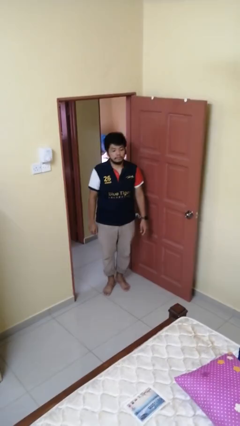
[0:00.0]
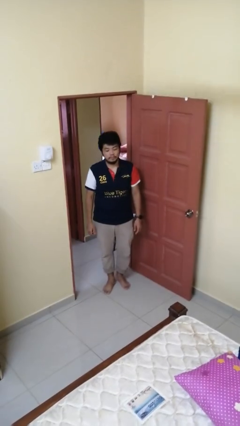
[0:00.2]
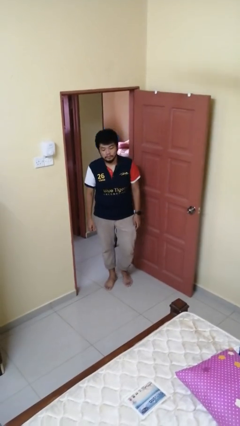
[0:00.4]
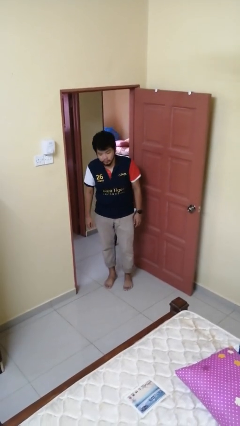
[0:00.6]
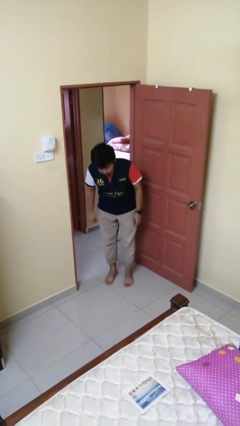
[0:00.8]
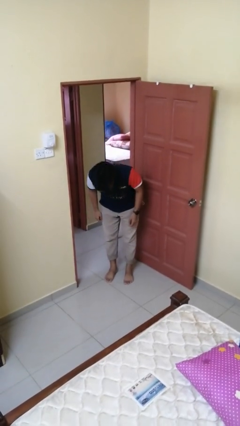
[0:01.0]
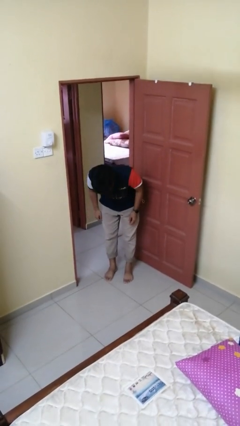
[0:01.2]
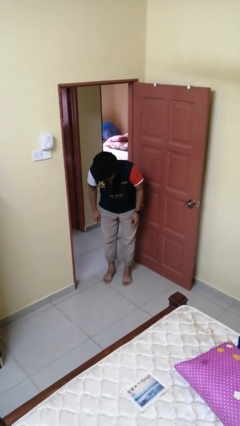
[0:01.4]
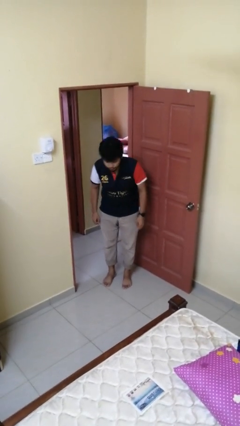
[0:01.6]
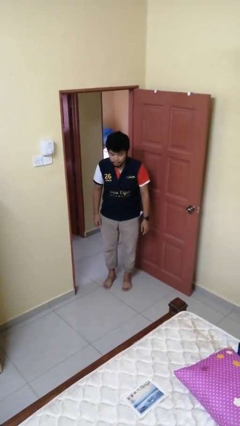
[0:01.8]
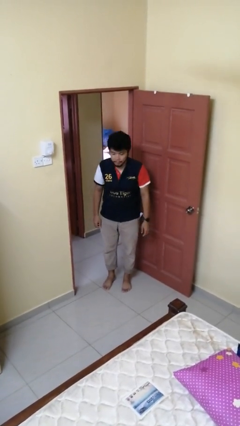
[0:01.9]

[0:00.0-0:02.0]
person bows

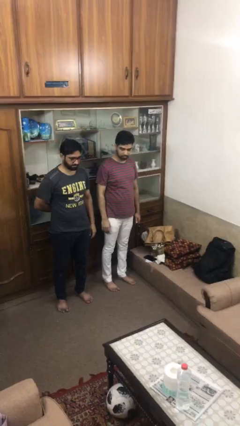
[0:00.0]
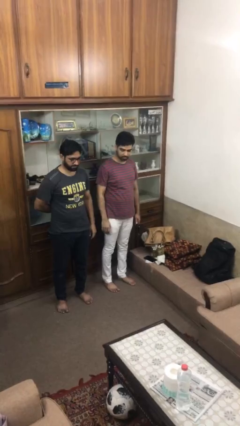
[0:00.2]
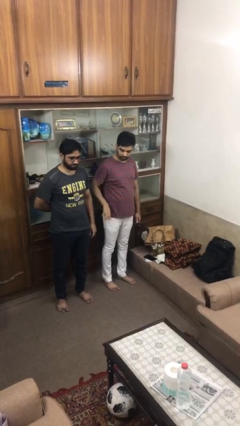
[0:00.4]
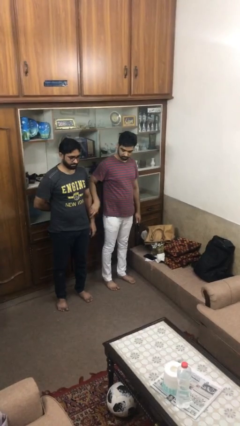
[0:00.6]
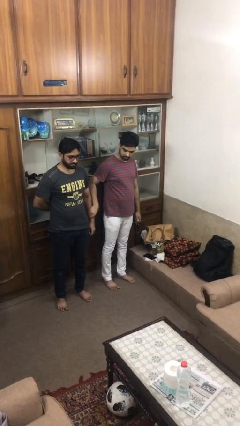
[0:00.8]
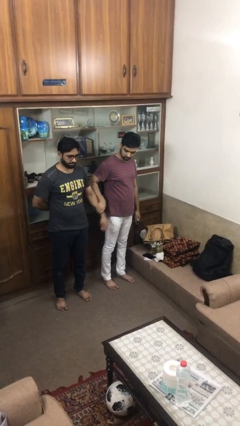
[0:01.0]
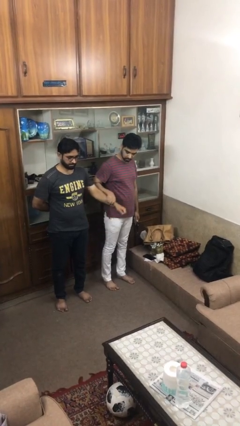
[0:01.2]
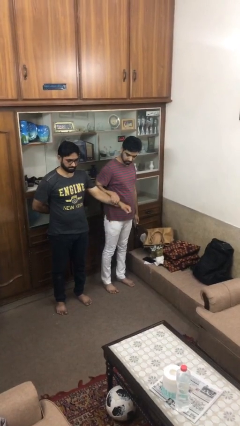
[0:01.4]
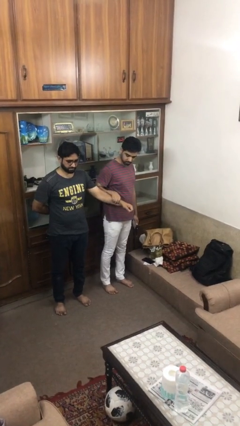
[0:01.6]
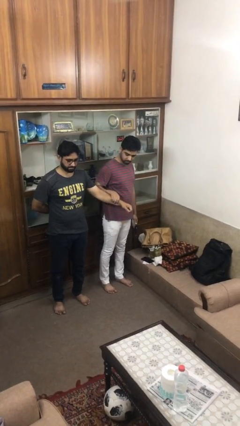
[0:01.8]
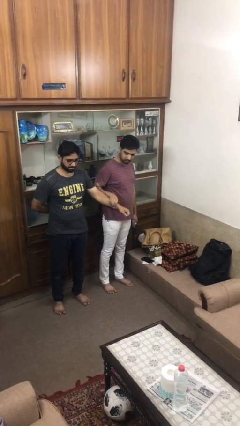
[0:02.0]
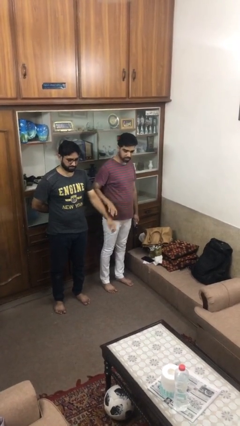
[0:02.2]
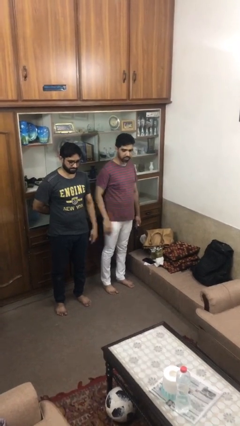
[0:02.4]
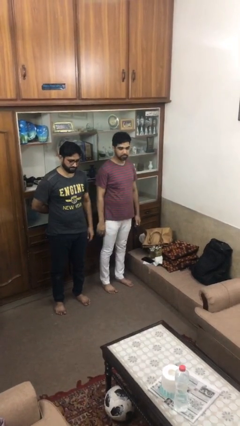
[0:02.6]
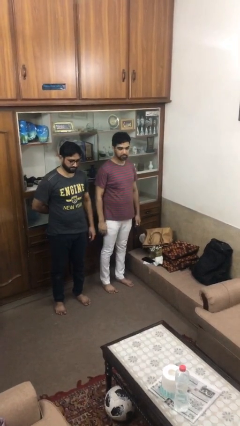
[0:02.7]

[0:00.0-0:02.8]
person grabs person by forearm

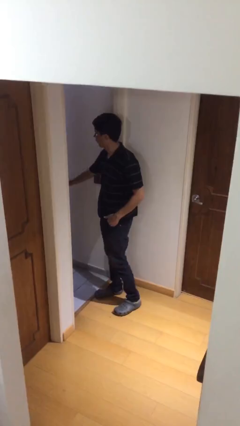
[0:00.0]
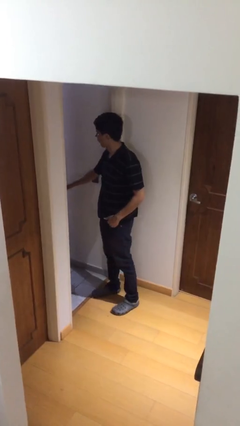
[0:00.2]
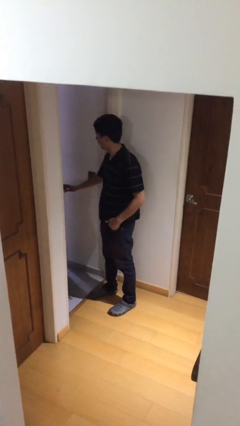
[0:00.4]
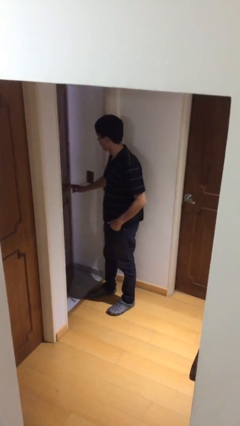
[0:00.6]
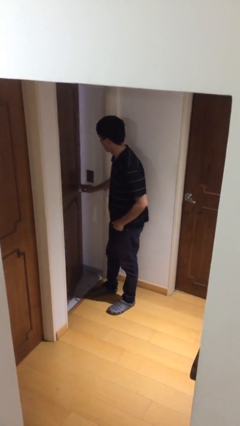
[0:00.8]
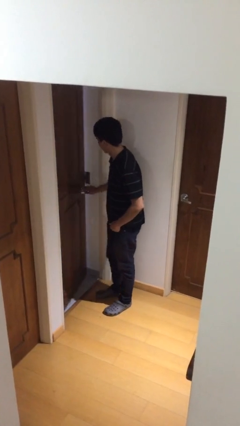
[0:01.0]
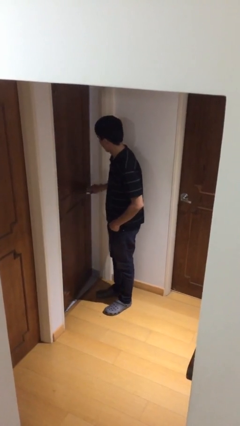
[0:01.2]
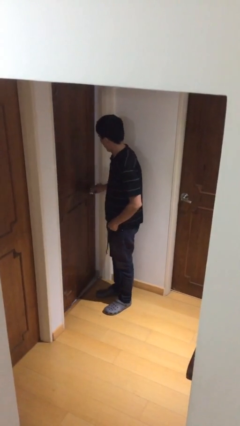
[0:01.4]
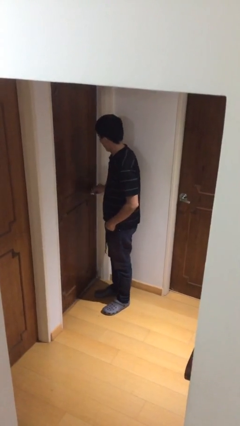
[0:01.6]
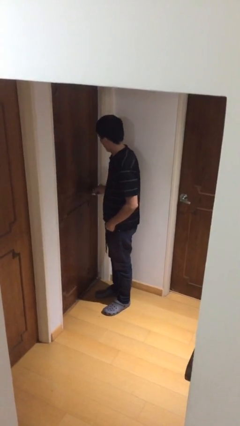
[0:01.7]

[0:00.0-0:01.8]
person closes facility door

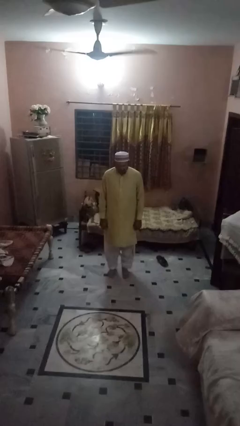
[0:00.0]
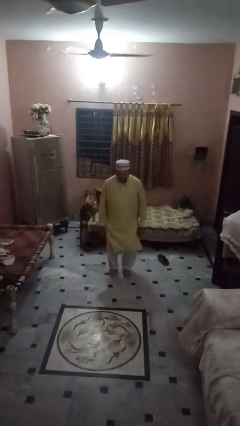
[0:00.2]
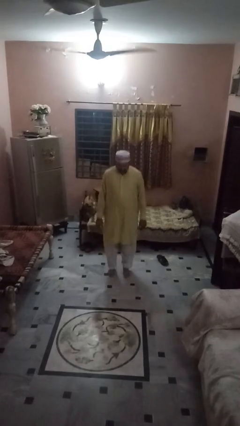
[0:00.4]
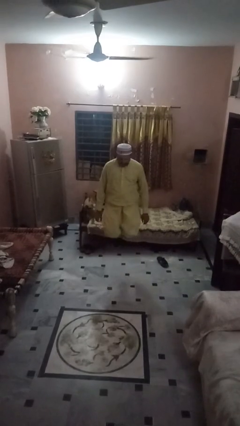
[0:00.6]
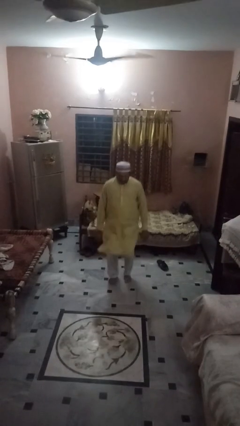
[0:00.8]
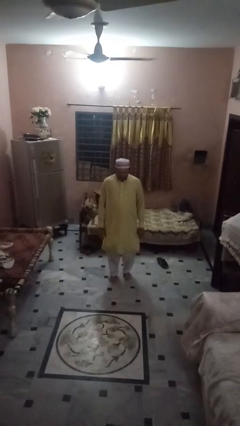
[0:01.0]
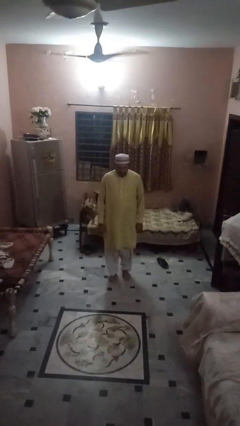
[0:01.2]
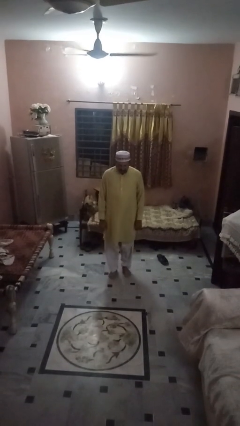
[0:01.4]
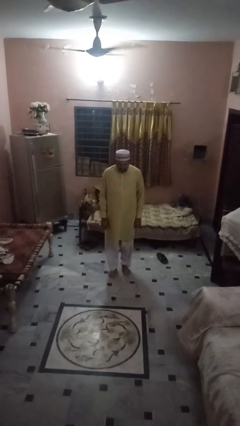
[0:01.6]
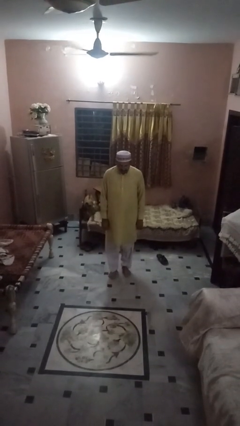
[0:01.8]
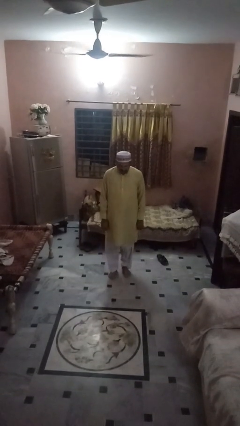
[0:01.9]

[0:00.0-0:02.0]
person jumps

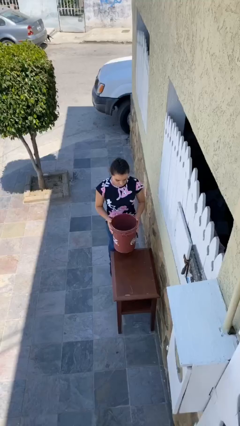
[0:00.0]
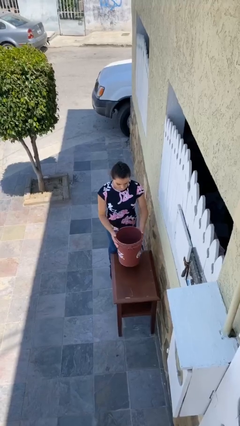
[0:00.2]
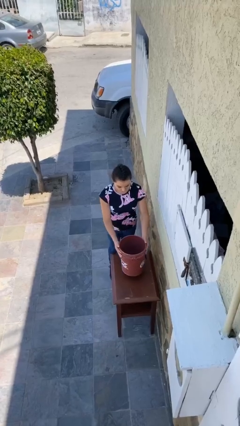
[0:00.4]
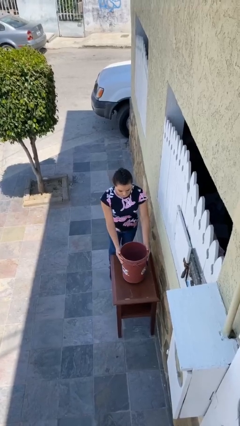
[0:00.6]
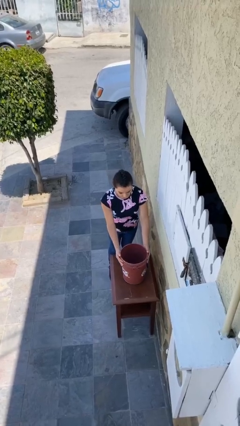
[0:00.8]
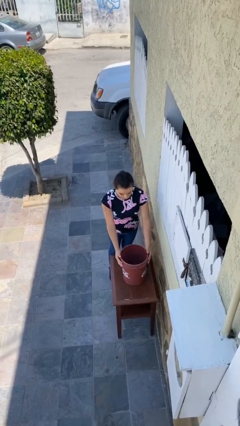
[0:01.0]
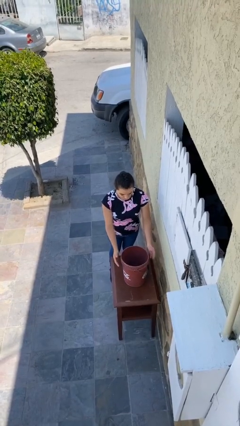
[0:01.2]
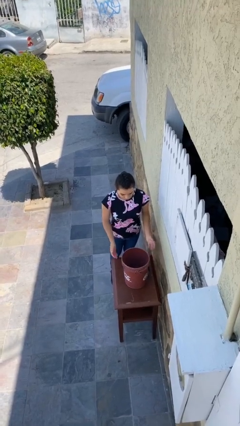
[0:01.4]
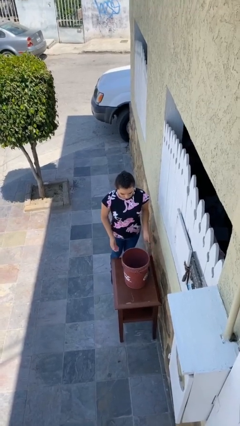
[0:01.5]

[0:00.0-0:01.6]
person puts down object on table

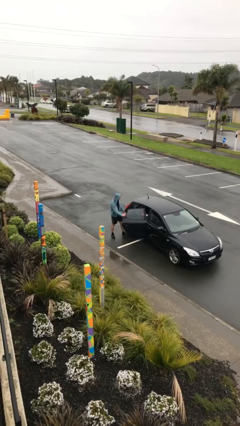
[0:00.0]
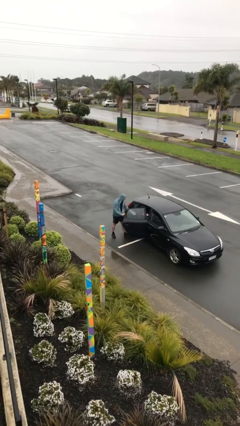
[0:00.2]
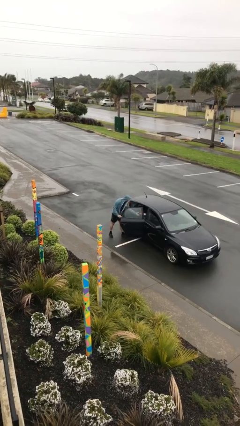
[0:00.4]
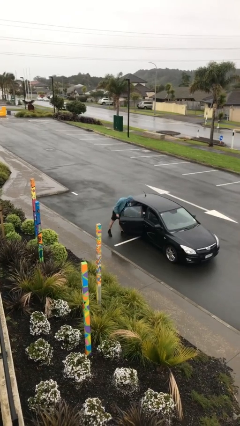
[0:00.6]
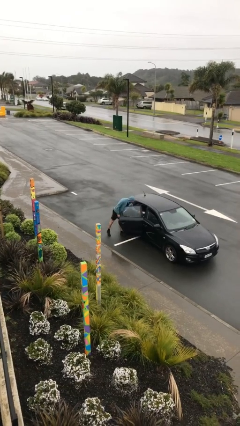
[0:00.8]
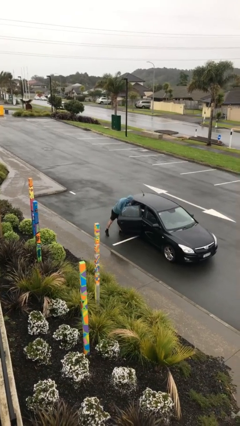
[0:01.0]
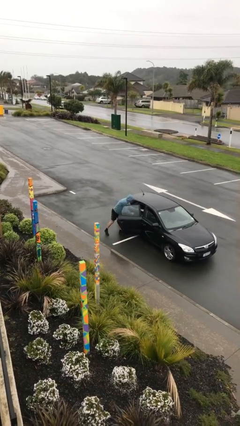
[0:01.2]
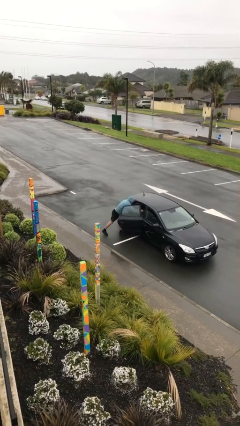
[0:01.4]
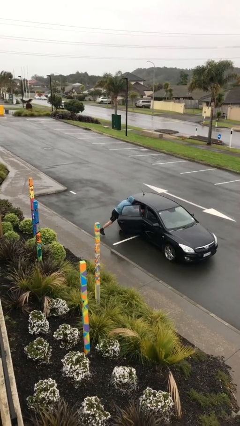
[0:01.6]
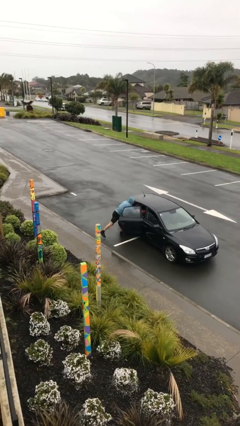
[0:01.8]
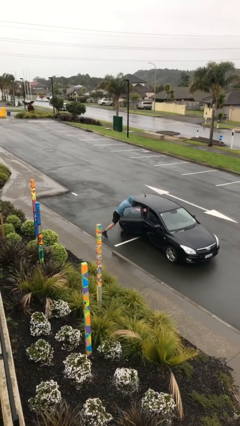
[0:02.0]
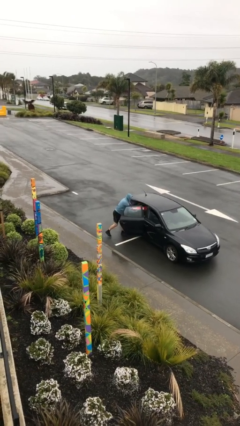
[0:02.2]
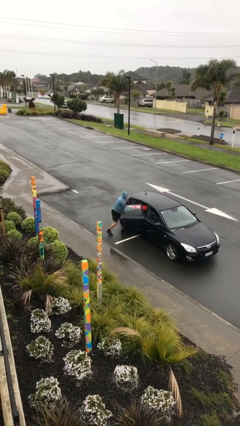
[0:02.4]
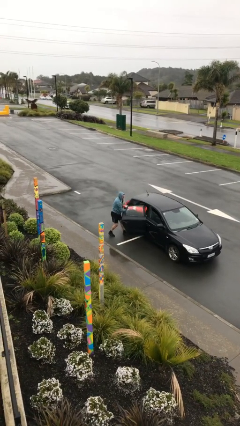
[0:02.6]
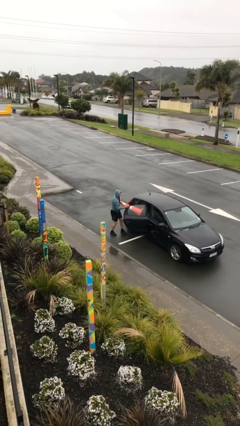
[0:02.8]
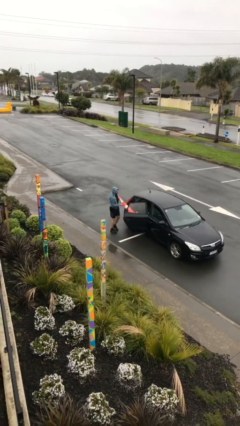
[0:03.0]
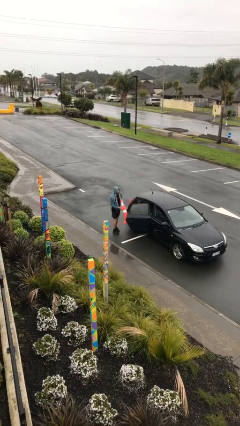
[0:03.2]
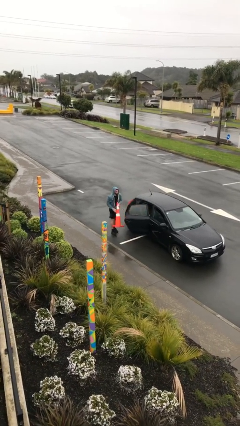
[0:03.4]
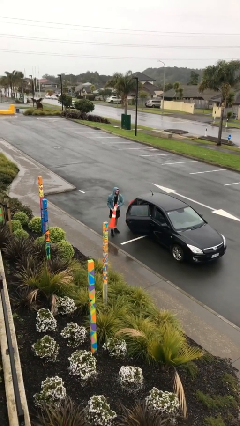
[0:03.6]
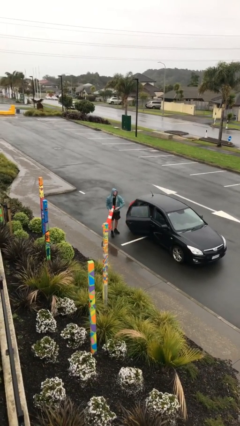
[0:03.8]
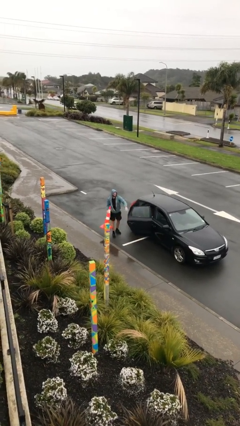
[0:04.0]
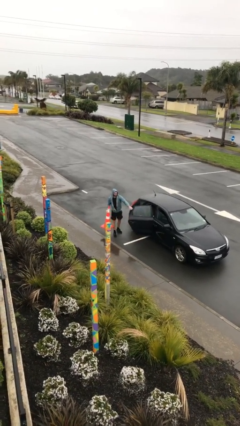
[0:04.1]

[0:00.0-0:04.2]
person unloads car

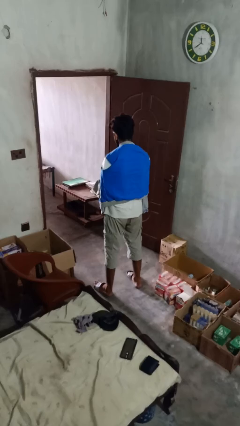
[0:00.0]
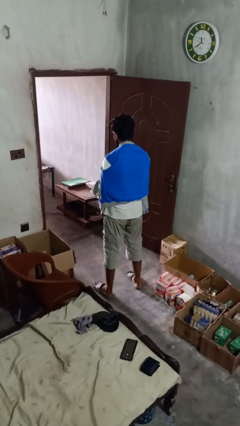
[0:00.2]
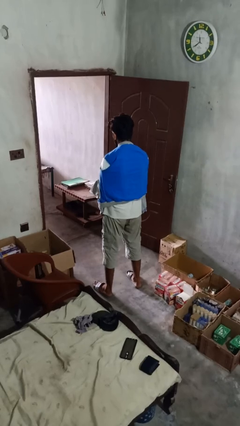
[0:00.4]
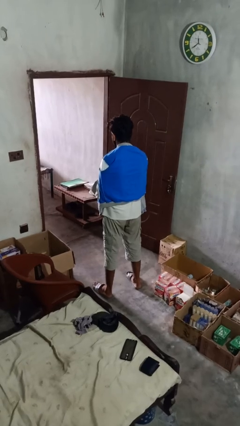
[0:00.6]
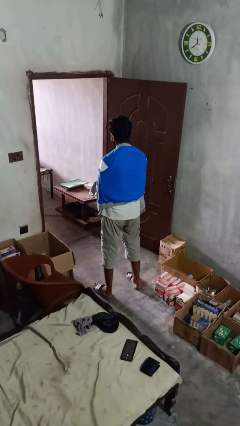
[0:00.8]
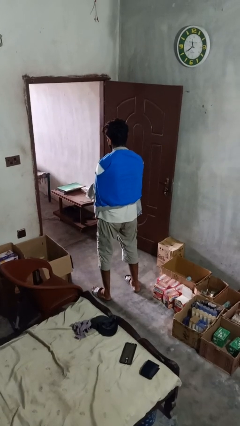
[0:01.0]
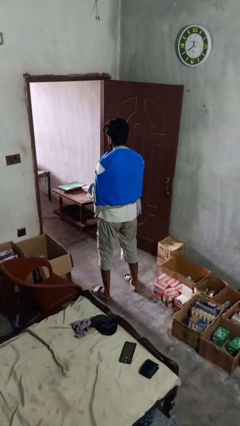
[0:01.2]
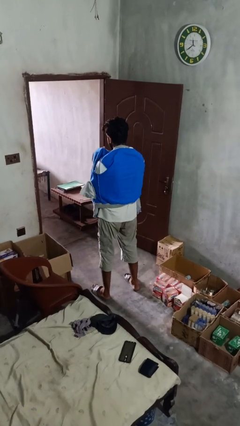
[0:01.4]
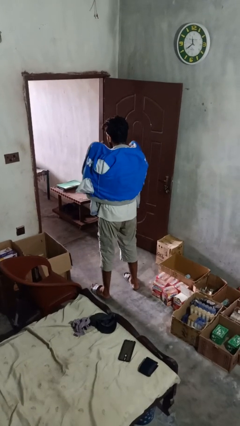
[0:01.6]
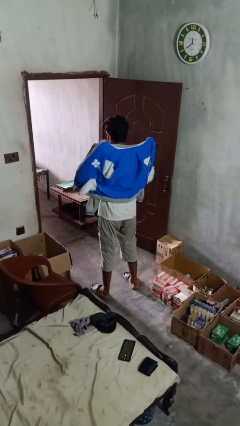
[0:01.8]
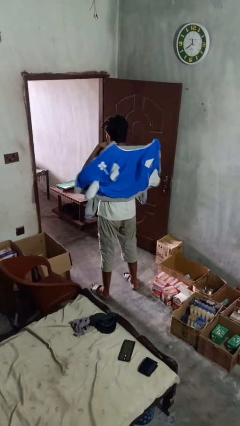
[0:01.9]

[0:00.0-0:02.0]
person unzips jacket

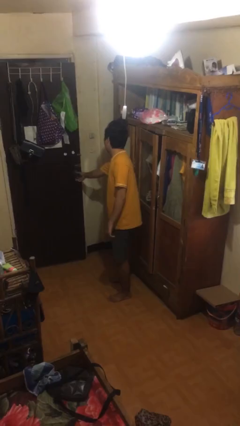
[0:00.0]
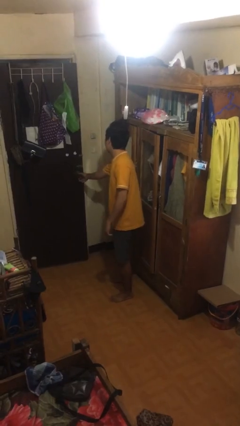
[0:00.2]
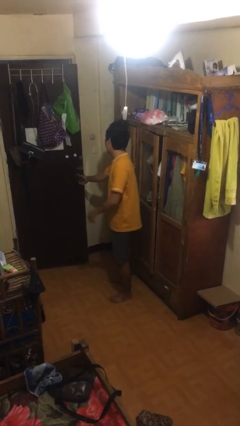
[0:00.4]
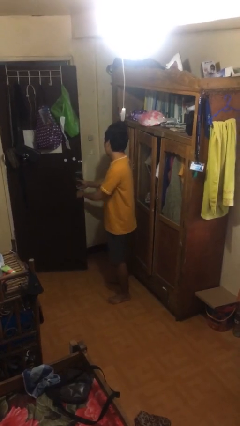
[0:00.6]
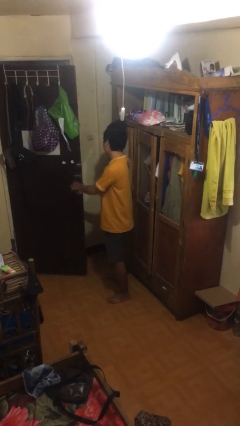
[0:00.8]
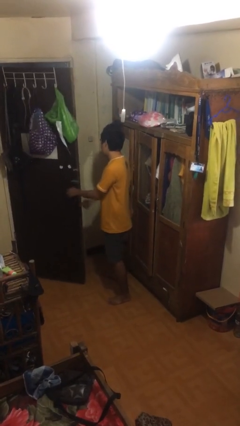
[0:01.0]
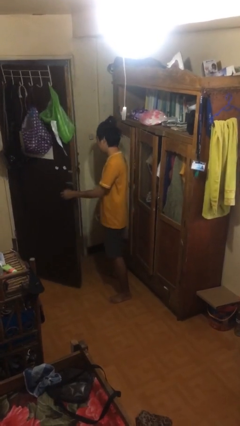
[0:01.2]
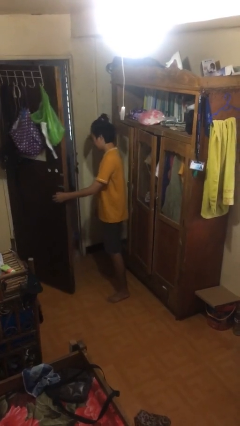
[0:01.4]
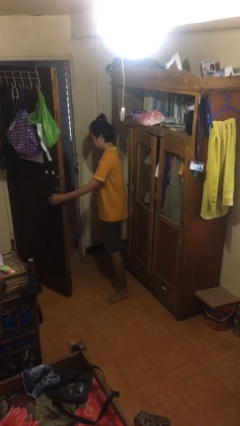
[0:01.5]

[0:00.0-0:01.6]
person opens facility door
